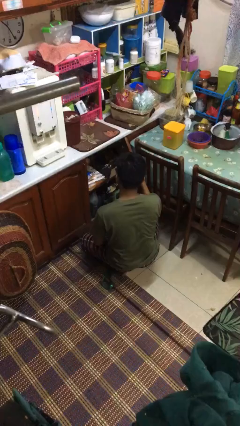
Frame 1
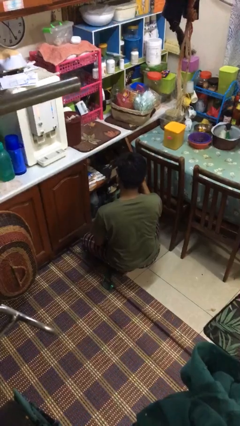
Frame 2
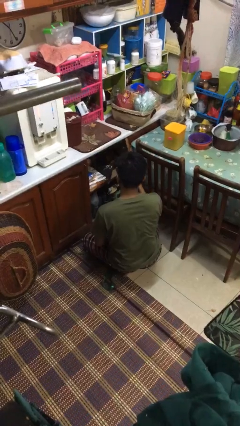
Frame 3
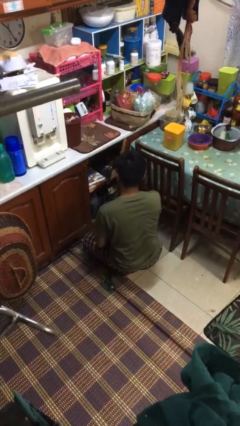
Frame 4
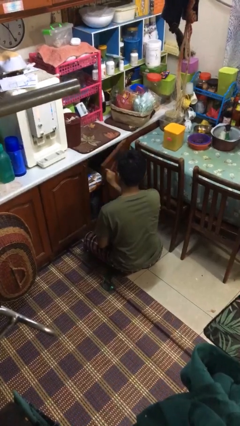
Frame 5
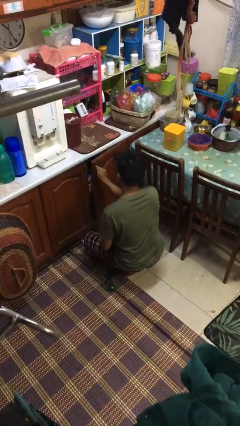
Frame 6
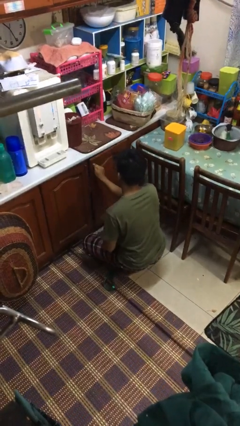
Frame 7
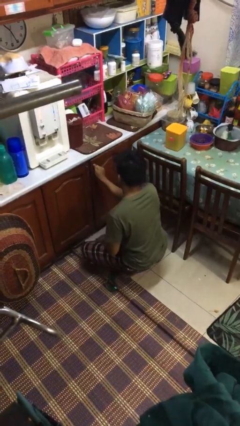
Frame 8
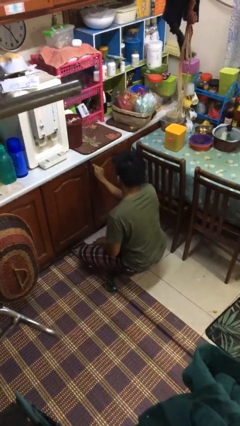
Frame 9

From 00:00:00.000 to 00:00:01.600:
person closes kitchen drawer

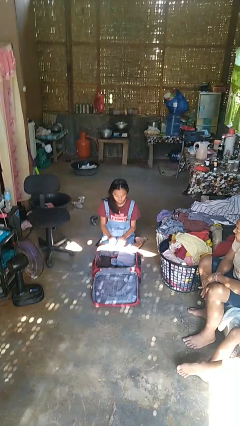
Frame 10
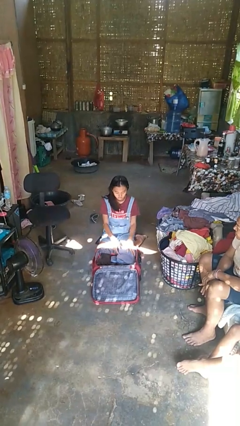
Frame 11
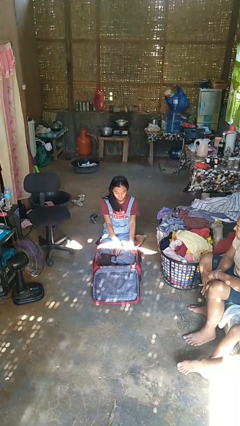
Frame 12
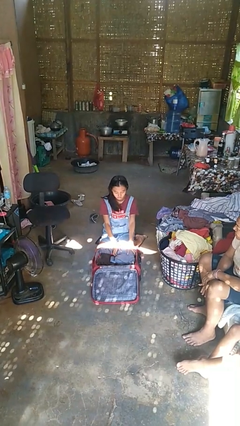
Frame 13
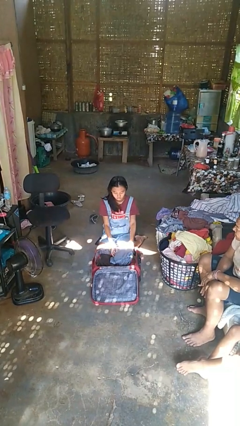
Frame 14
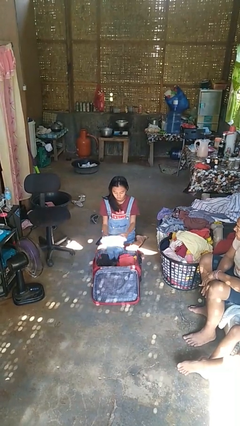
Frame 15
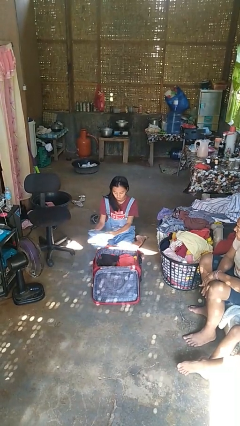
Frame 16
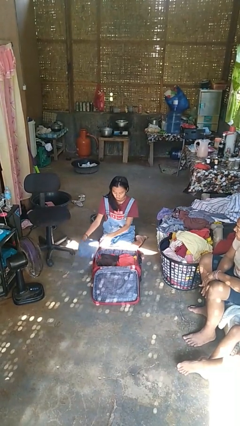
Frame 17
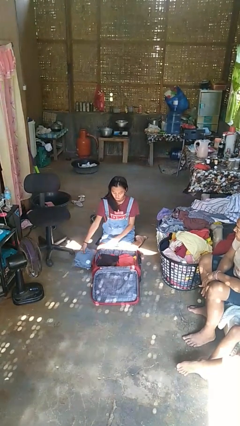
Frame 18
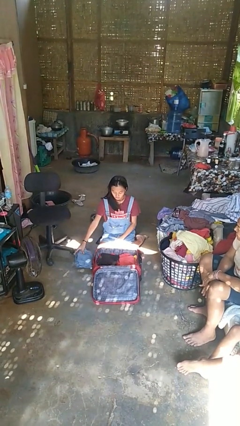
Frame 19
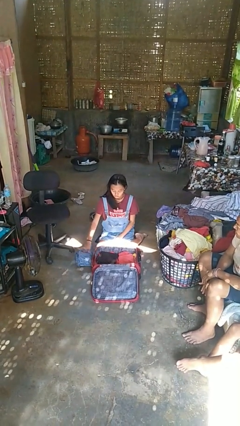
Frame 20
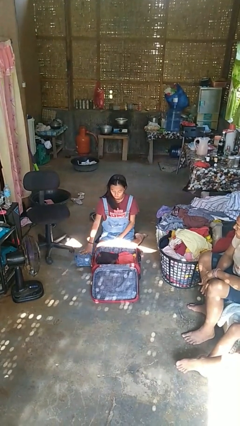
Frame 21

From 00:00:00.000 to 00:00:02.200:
person unloads clothes from suitcase

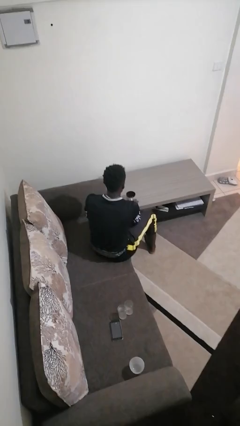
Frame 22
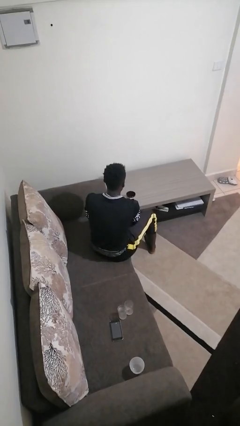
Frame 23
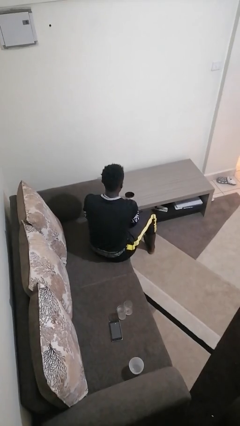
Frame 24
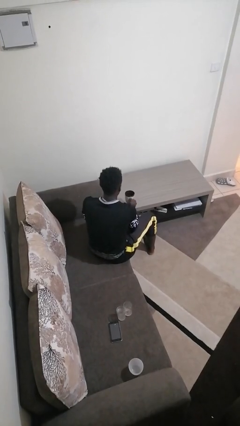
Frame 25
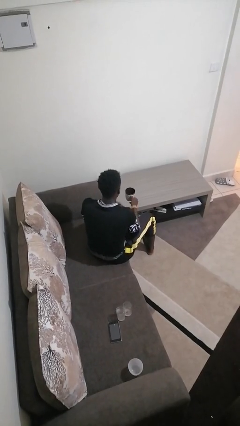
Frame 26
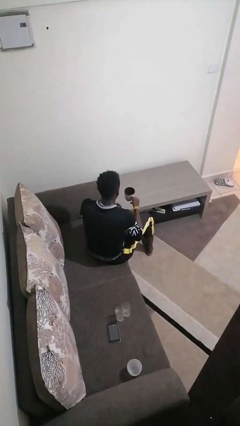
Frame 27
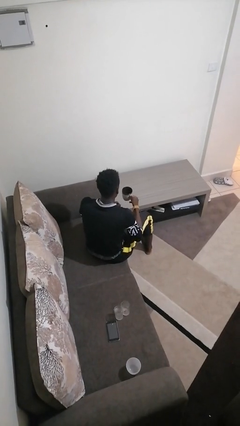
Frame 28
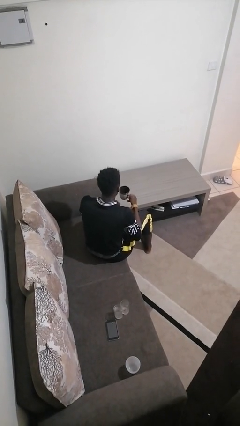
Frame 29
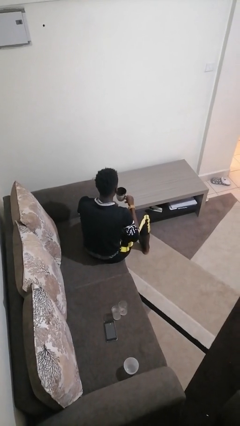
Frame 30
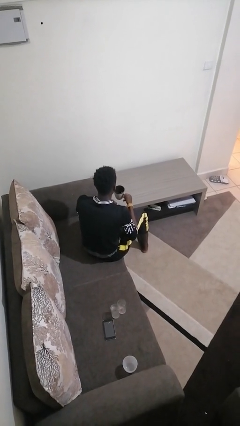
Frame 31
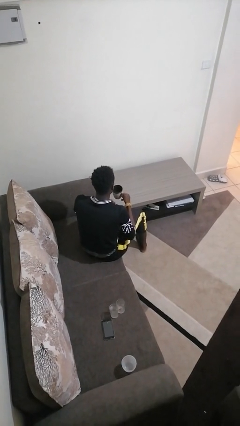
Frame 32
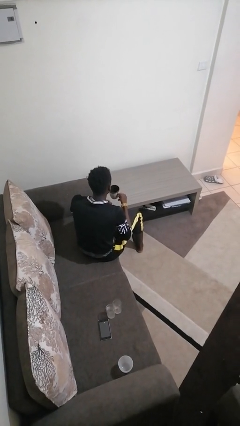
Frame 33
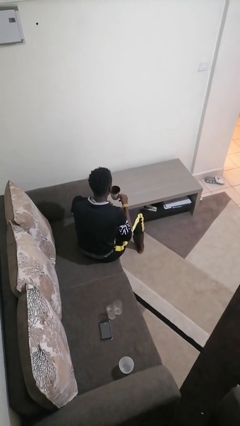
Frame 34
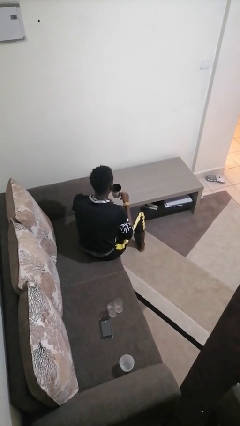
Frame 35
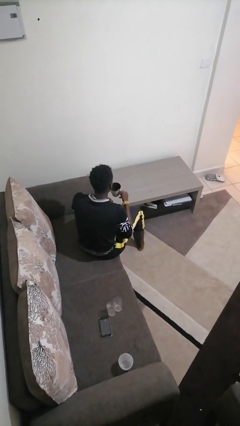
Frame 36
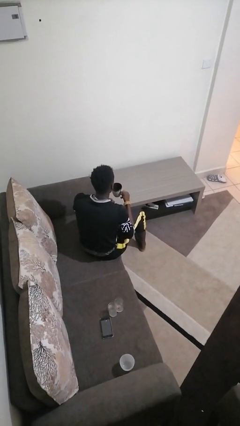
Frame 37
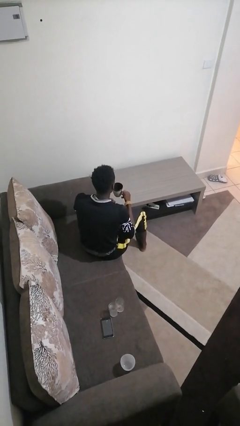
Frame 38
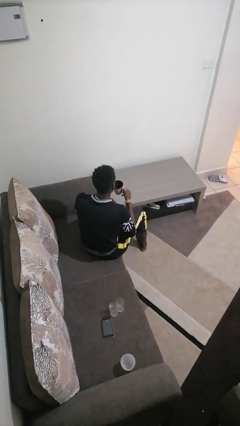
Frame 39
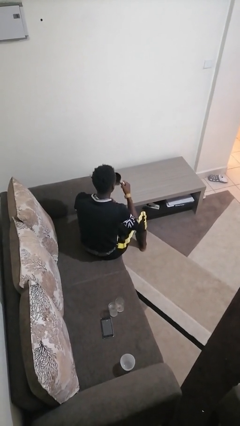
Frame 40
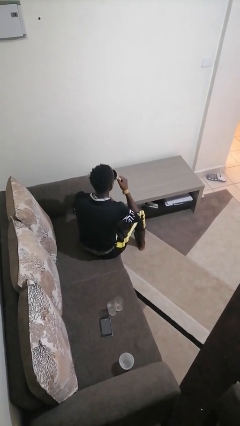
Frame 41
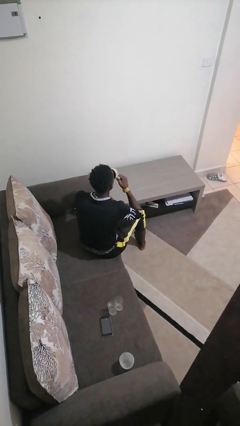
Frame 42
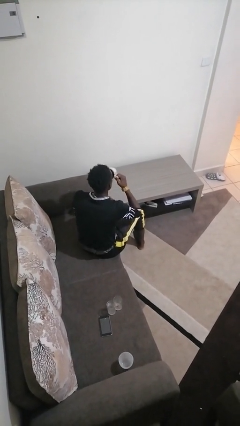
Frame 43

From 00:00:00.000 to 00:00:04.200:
person picks up object from table

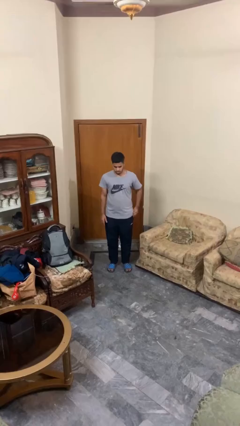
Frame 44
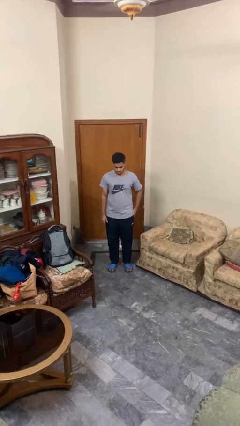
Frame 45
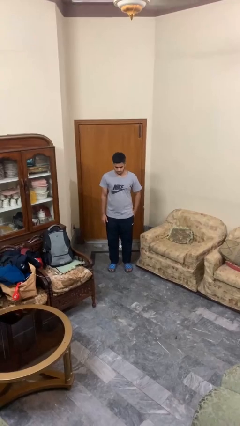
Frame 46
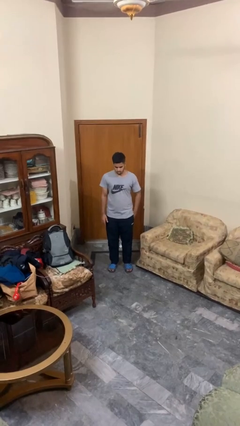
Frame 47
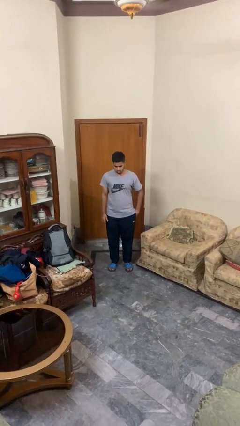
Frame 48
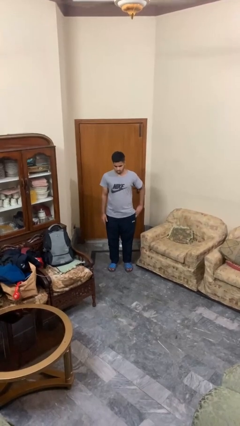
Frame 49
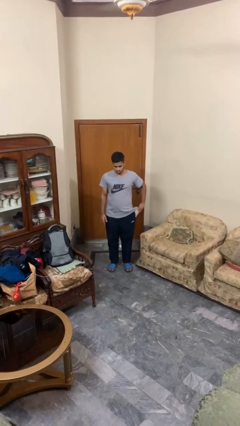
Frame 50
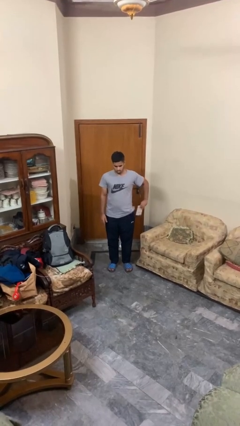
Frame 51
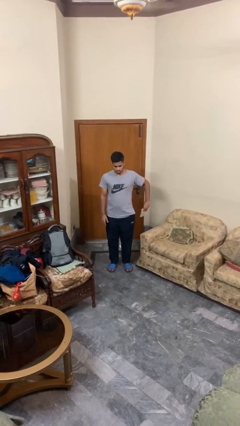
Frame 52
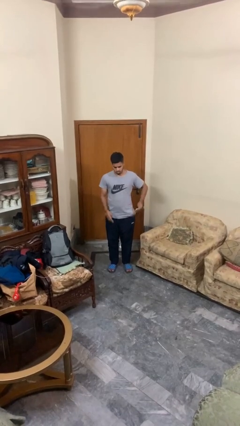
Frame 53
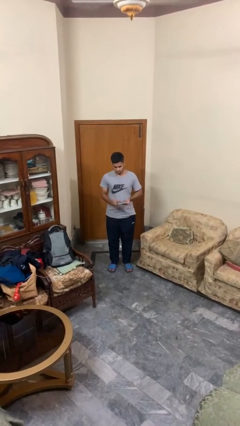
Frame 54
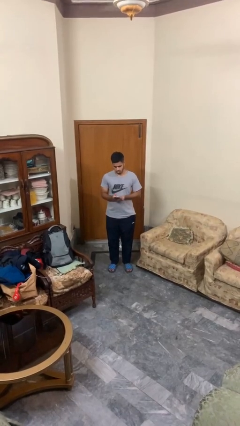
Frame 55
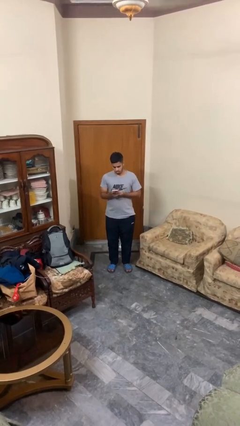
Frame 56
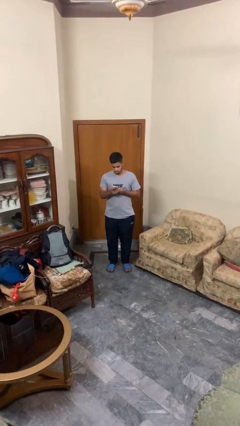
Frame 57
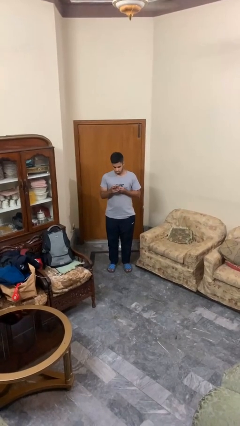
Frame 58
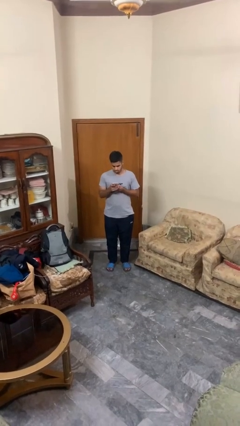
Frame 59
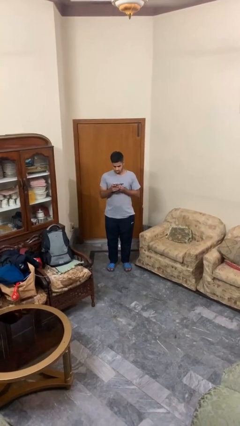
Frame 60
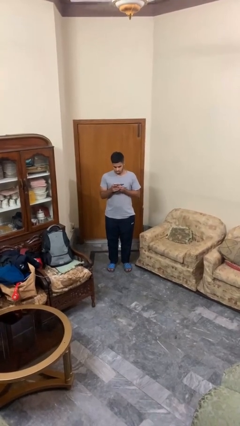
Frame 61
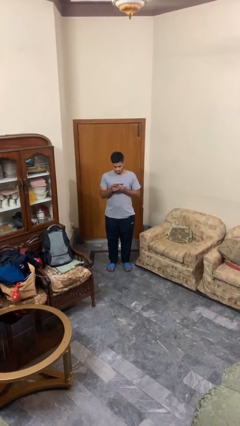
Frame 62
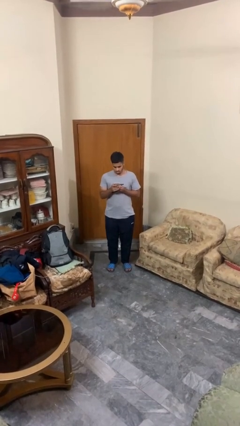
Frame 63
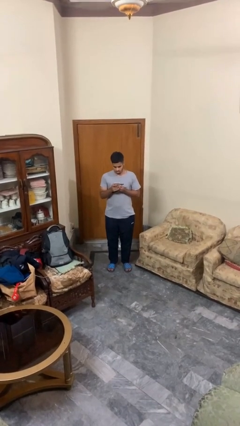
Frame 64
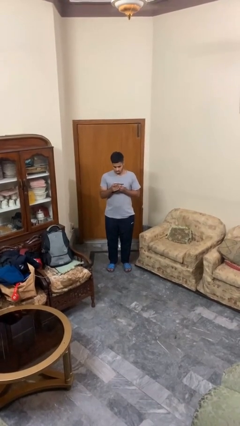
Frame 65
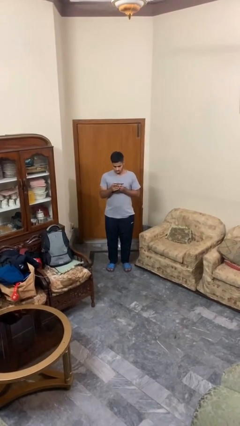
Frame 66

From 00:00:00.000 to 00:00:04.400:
person takes phone from pocket

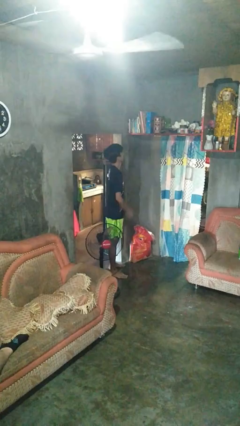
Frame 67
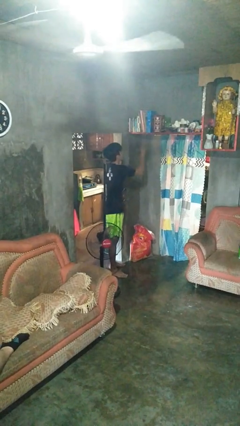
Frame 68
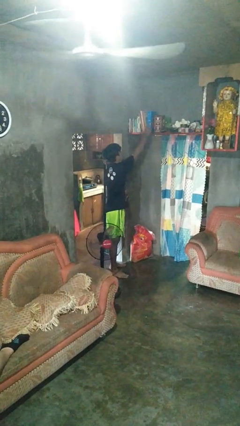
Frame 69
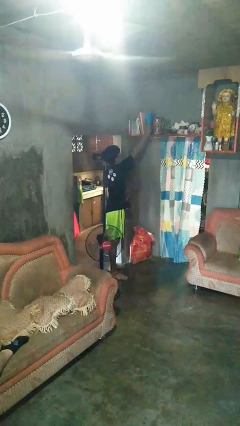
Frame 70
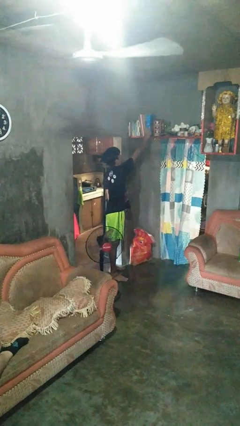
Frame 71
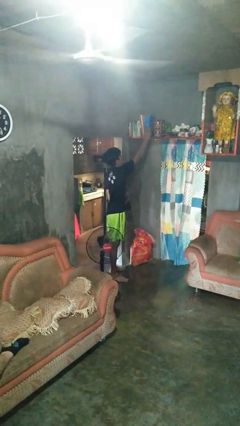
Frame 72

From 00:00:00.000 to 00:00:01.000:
person picks up object from shelf

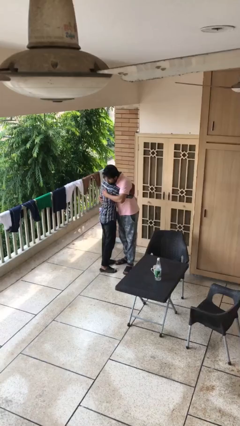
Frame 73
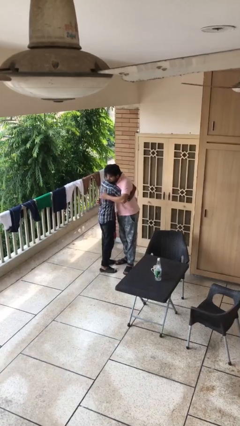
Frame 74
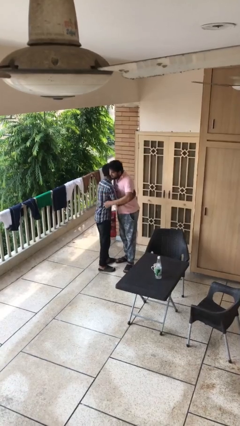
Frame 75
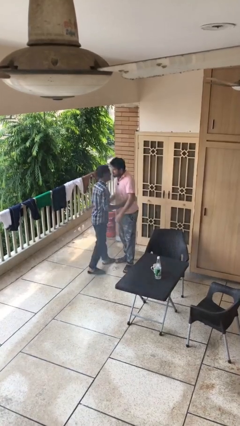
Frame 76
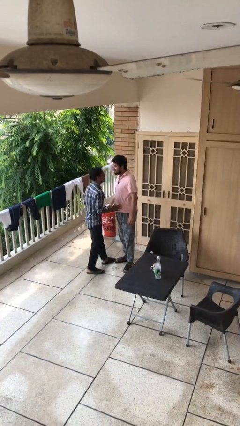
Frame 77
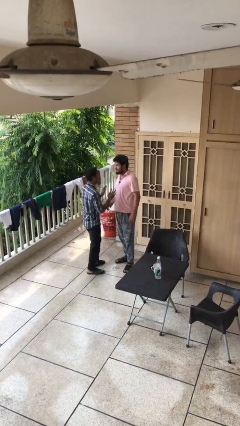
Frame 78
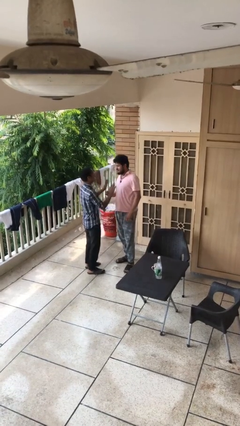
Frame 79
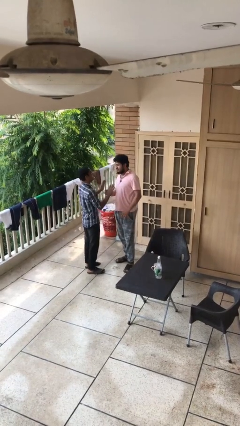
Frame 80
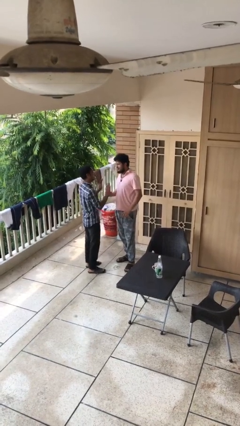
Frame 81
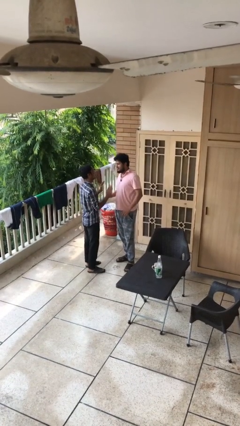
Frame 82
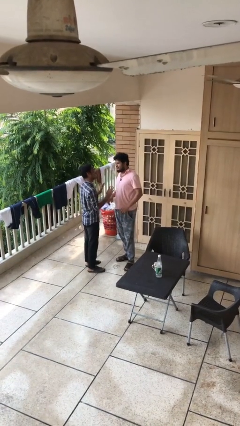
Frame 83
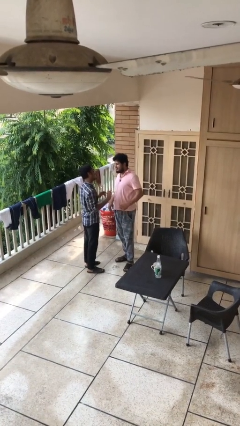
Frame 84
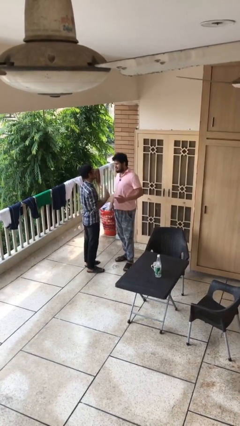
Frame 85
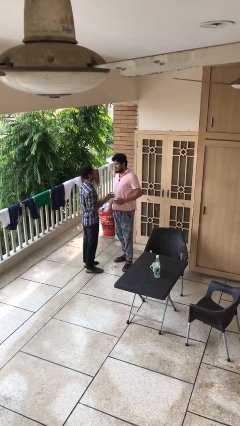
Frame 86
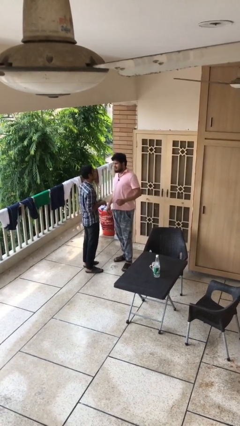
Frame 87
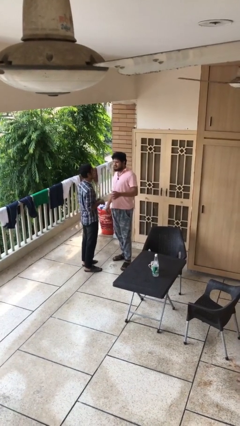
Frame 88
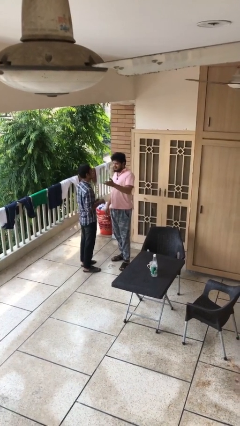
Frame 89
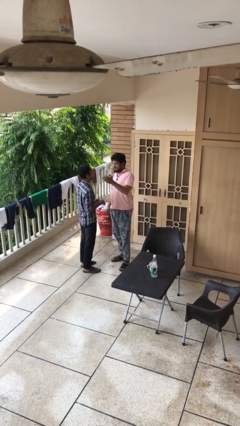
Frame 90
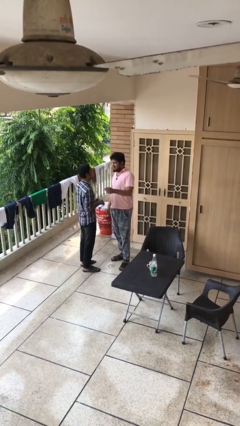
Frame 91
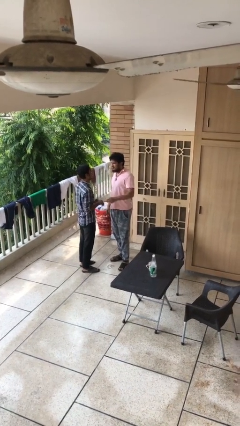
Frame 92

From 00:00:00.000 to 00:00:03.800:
person talks to person

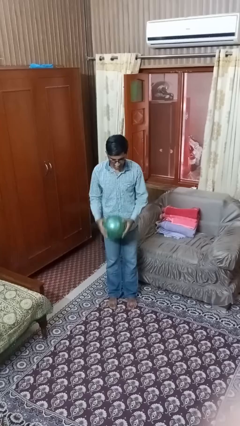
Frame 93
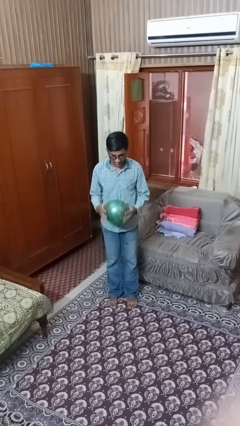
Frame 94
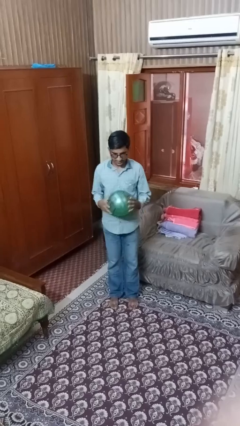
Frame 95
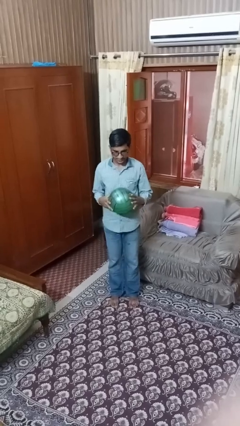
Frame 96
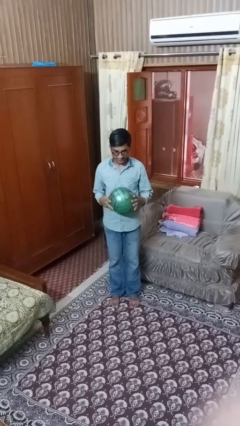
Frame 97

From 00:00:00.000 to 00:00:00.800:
person bounces ball on floor
